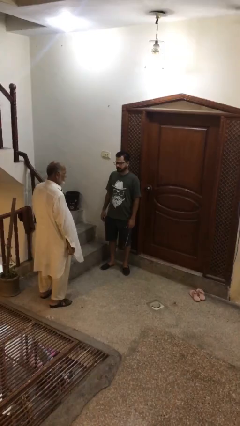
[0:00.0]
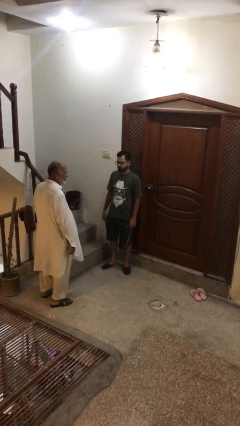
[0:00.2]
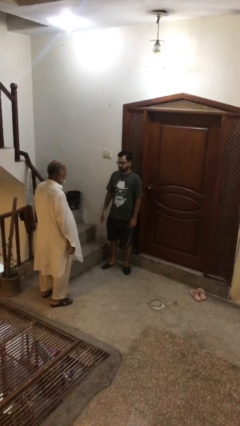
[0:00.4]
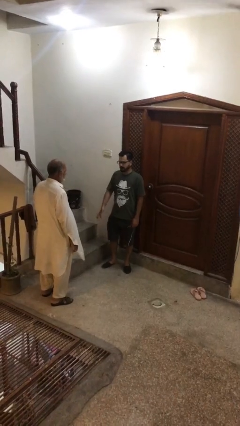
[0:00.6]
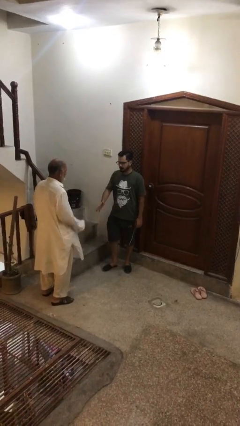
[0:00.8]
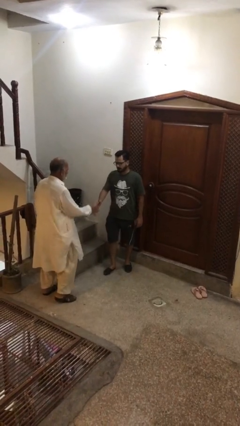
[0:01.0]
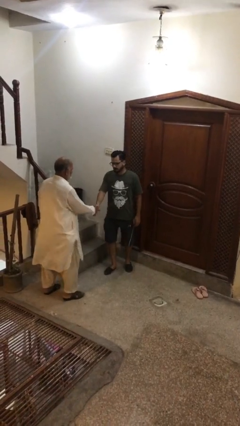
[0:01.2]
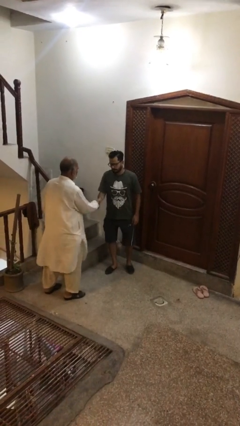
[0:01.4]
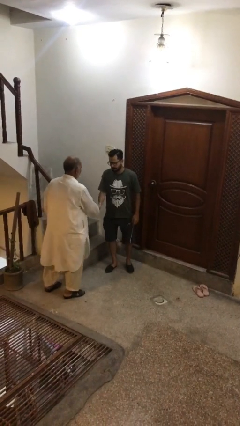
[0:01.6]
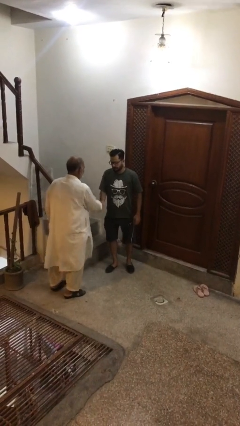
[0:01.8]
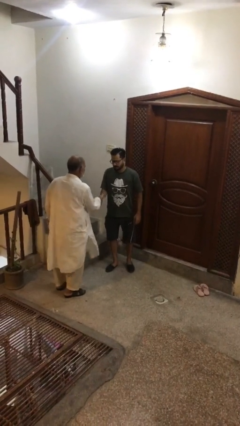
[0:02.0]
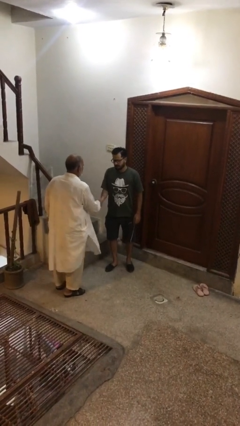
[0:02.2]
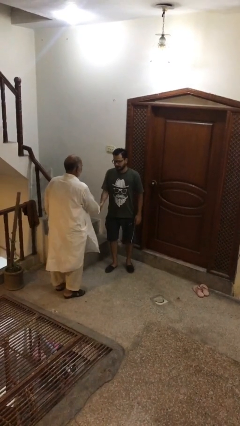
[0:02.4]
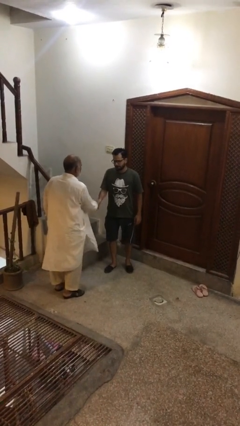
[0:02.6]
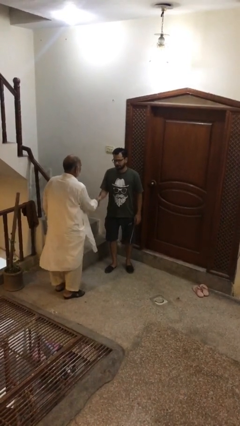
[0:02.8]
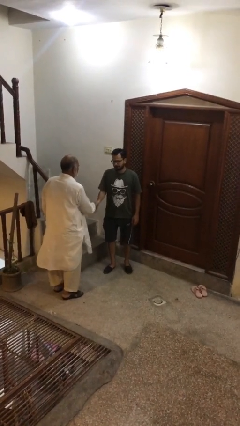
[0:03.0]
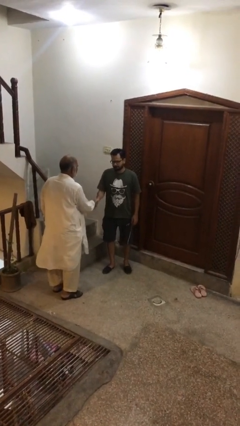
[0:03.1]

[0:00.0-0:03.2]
person shakes hand

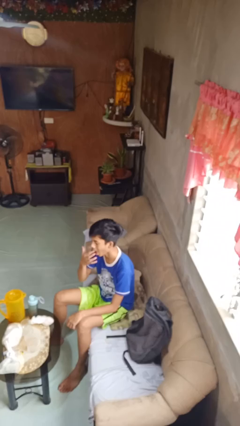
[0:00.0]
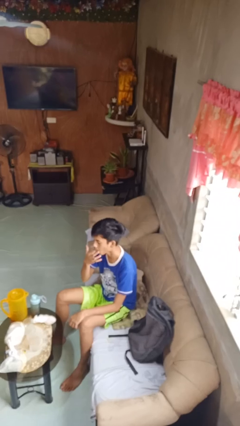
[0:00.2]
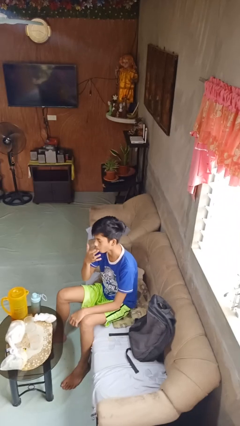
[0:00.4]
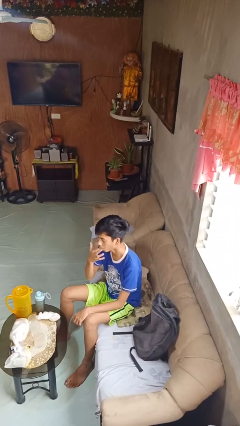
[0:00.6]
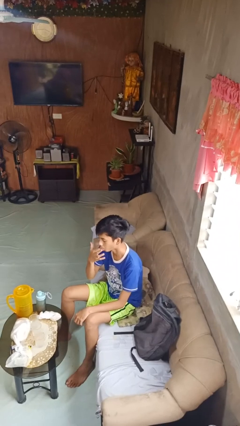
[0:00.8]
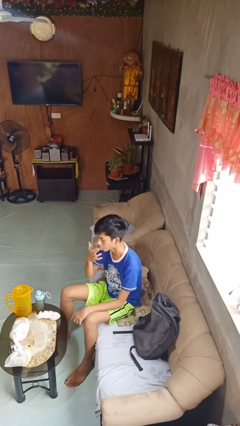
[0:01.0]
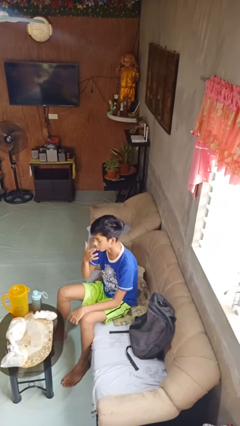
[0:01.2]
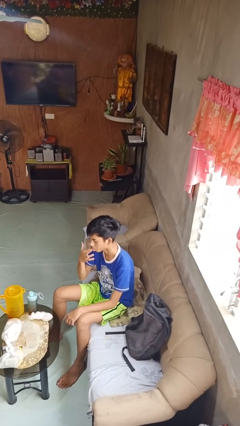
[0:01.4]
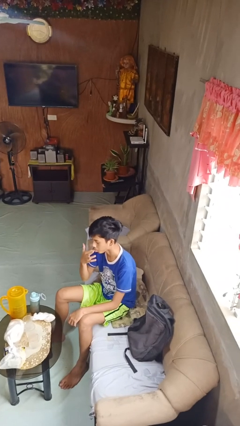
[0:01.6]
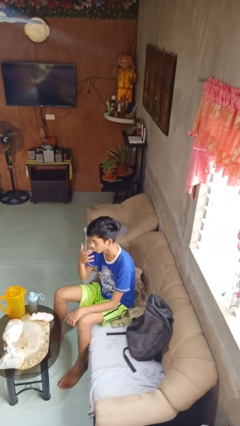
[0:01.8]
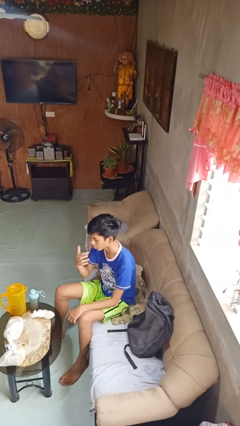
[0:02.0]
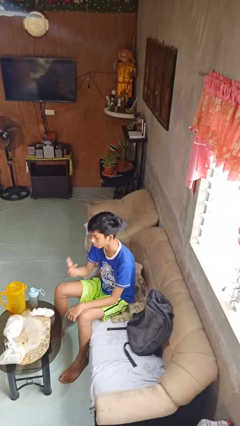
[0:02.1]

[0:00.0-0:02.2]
person licks fingers

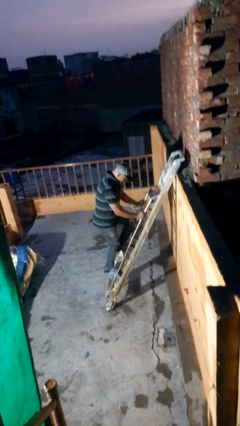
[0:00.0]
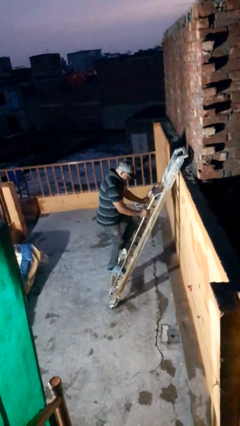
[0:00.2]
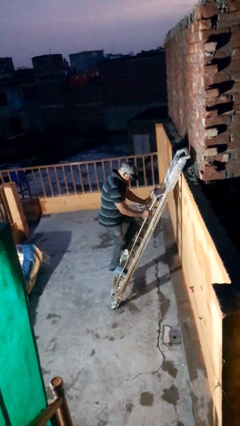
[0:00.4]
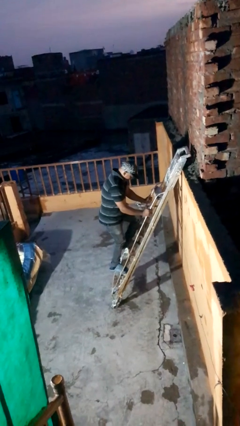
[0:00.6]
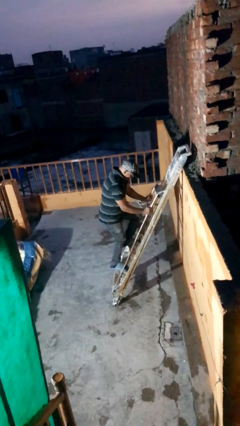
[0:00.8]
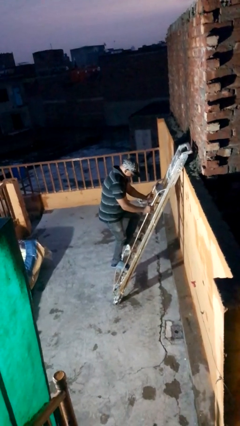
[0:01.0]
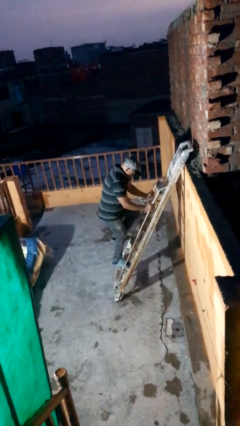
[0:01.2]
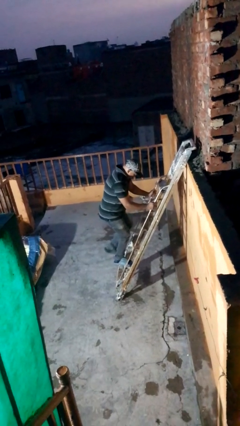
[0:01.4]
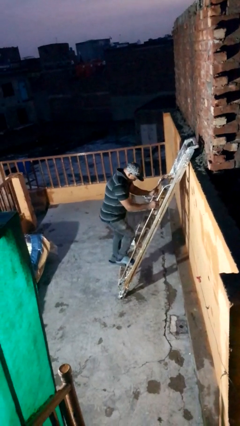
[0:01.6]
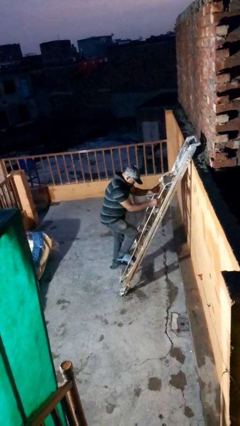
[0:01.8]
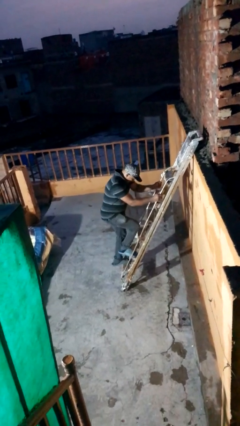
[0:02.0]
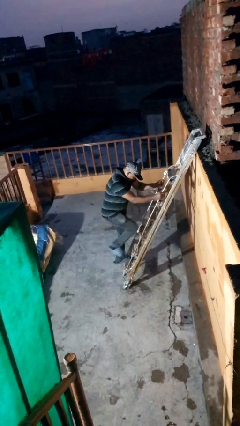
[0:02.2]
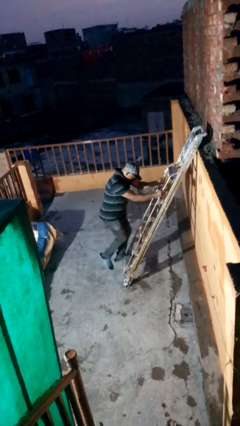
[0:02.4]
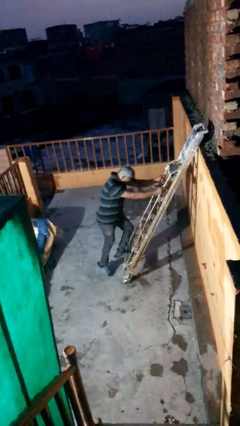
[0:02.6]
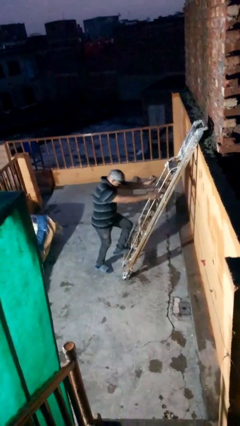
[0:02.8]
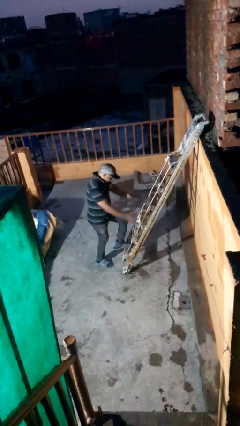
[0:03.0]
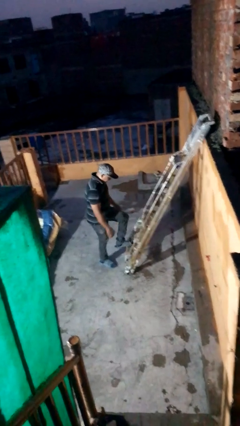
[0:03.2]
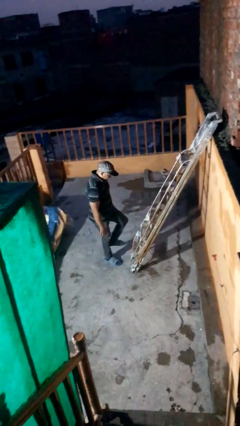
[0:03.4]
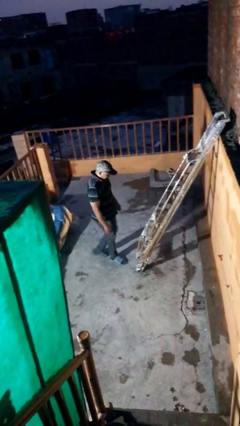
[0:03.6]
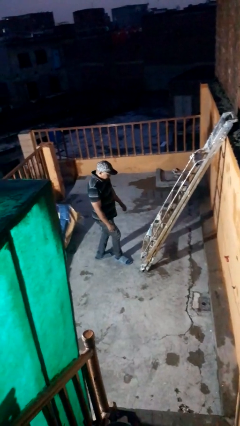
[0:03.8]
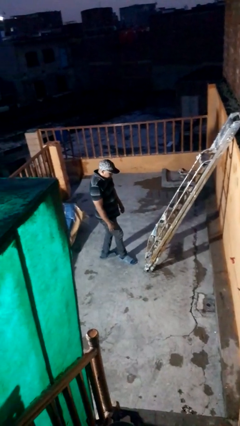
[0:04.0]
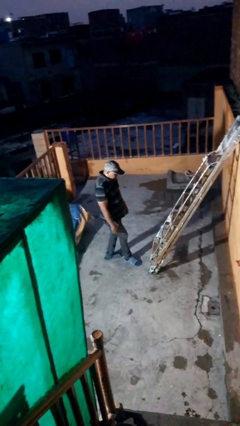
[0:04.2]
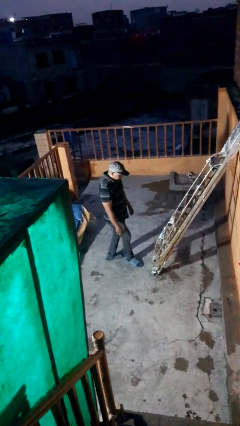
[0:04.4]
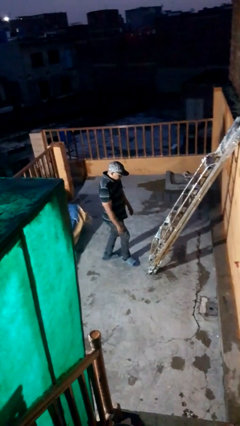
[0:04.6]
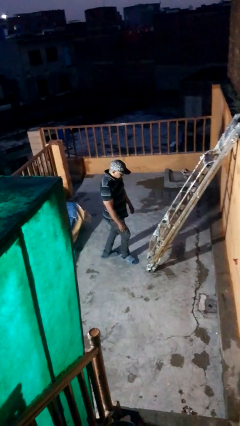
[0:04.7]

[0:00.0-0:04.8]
person climbs down ladder

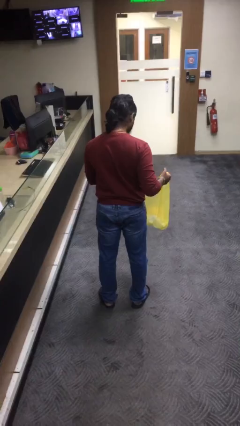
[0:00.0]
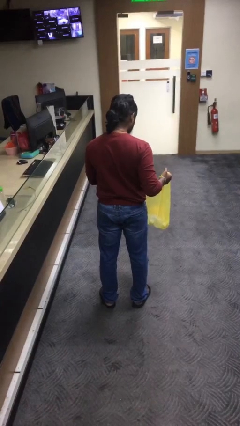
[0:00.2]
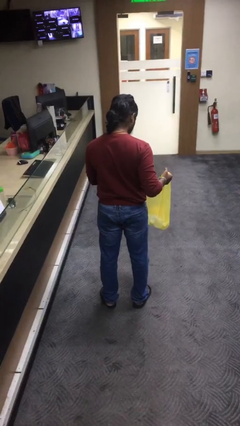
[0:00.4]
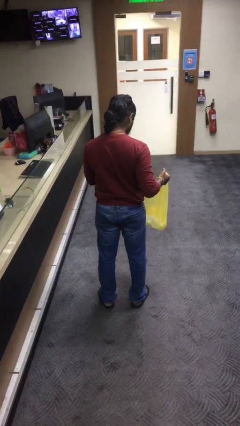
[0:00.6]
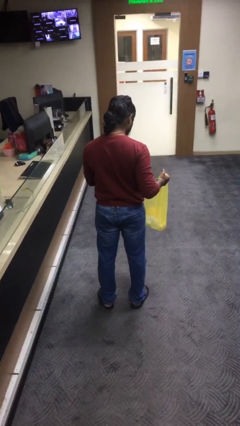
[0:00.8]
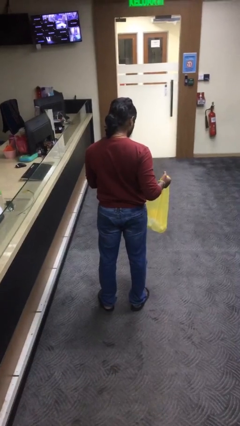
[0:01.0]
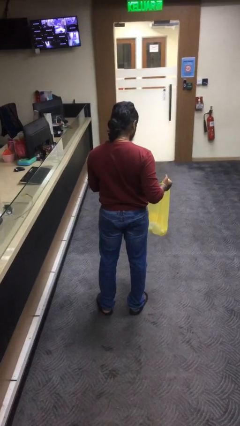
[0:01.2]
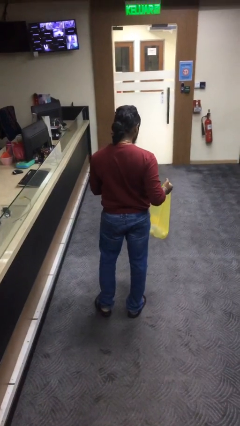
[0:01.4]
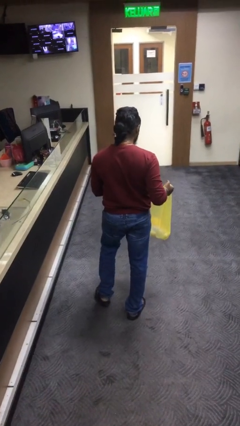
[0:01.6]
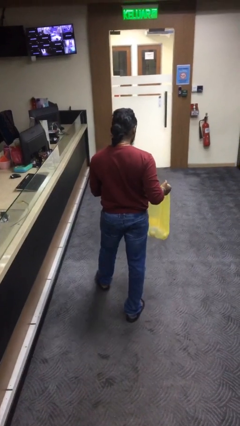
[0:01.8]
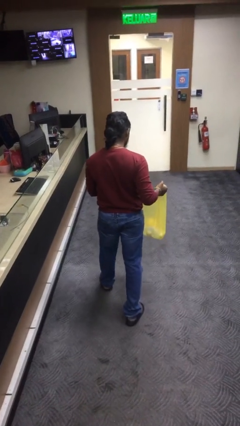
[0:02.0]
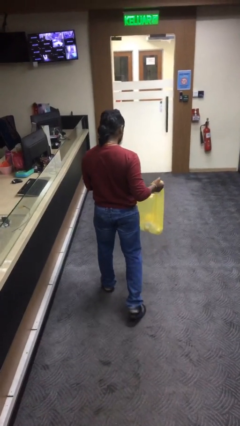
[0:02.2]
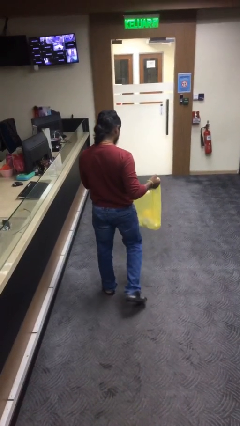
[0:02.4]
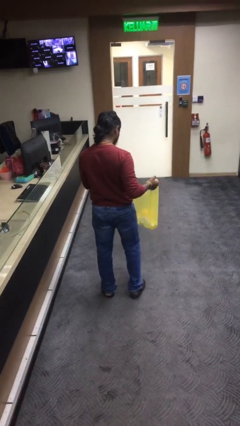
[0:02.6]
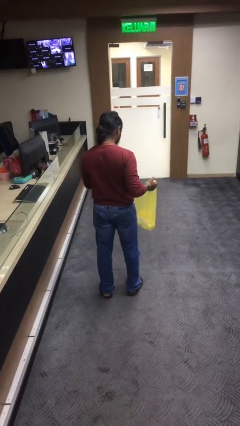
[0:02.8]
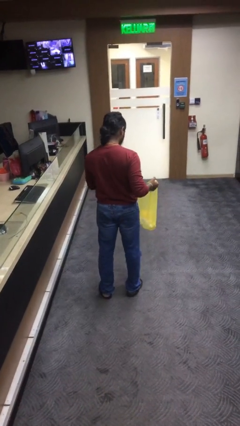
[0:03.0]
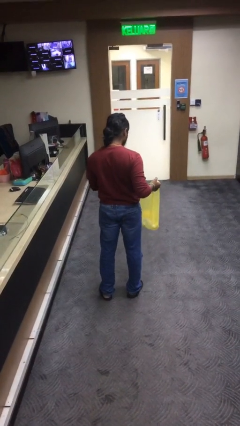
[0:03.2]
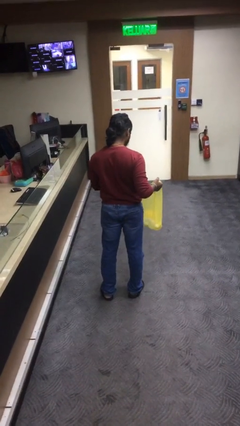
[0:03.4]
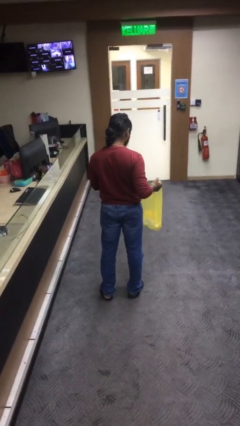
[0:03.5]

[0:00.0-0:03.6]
person carries groceries

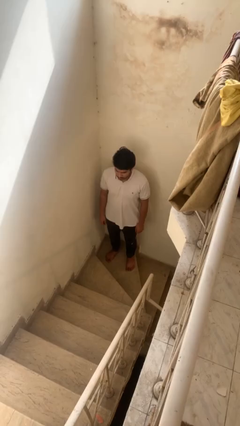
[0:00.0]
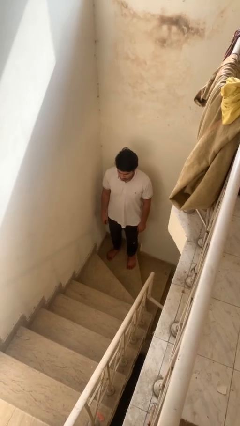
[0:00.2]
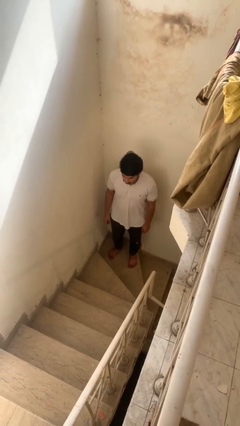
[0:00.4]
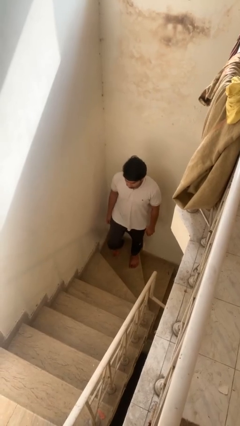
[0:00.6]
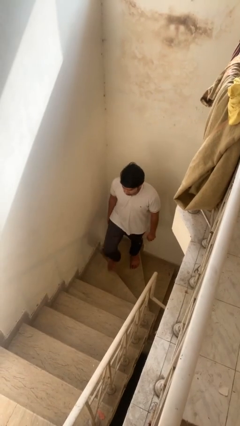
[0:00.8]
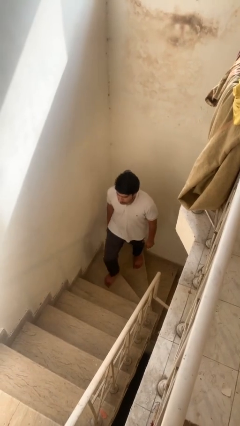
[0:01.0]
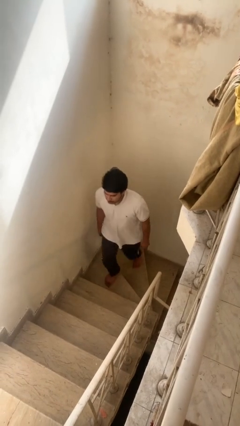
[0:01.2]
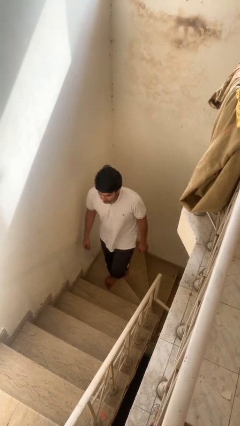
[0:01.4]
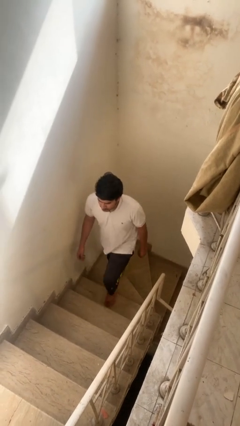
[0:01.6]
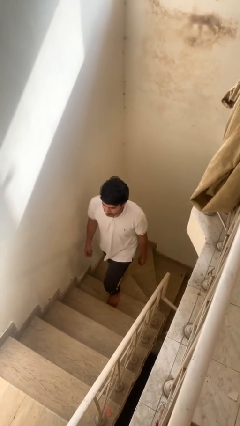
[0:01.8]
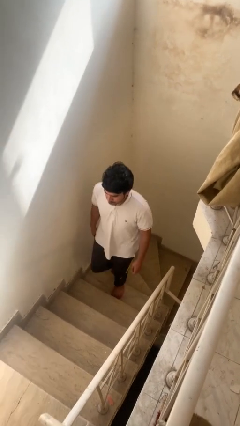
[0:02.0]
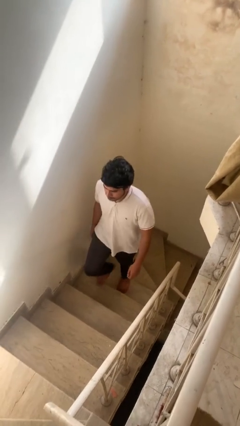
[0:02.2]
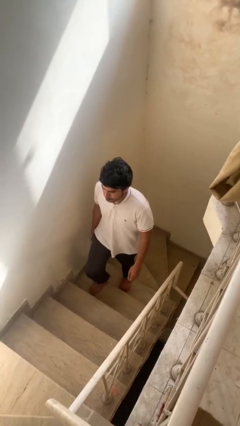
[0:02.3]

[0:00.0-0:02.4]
person climbs up stairs

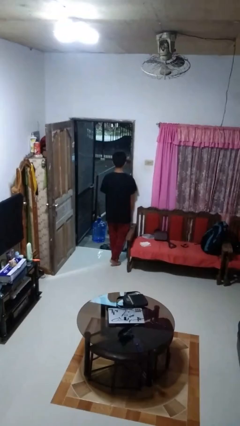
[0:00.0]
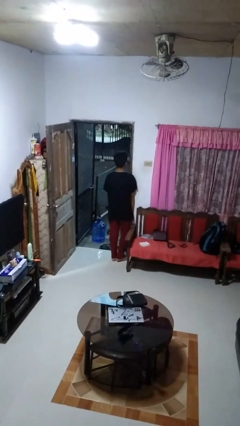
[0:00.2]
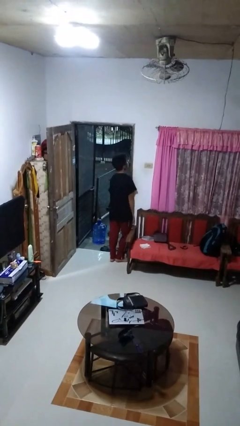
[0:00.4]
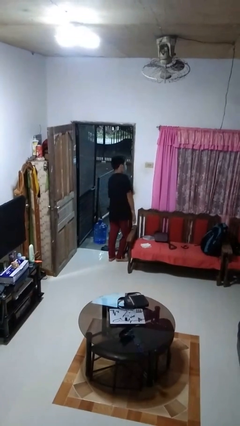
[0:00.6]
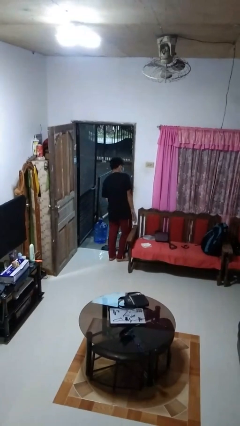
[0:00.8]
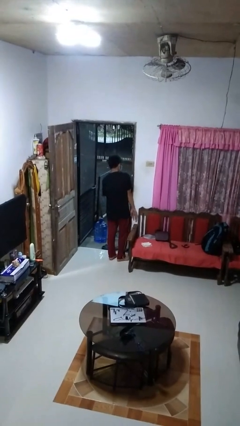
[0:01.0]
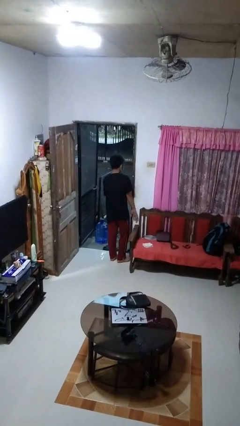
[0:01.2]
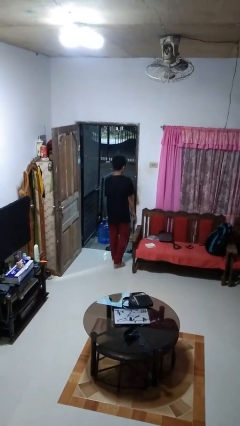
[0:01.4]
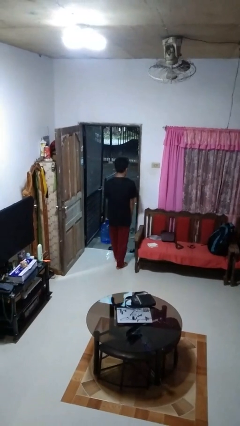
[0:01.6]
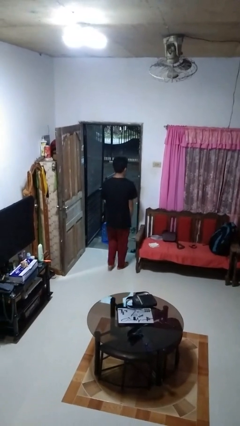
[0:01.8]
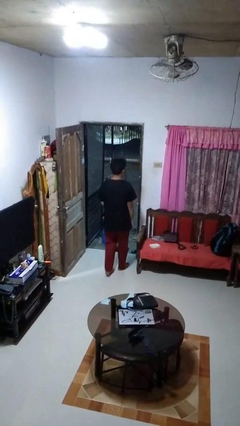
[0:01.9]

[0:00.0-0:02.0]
person bumps into wall
